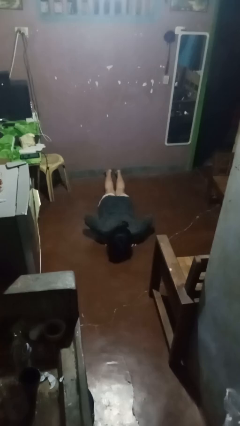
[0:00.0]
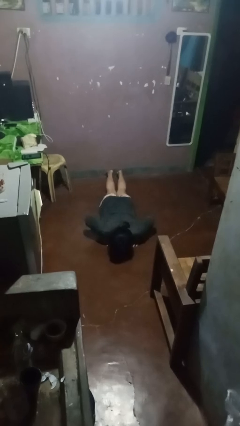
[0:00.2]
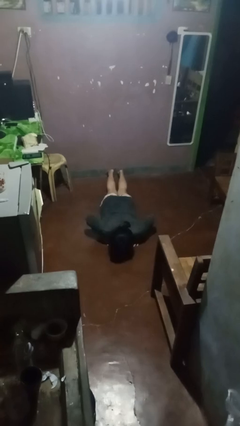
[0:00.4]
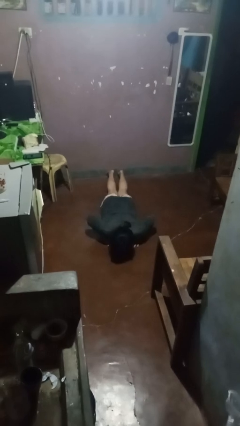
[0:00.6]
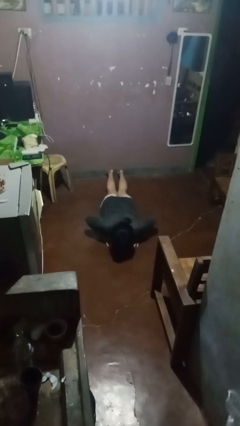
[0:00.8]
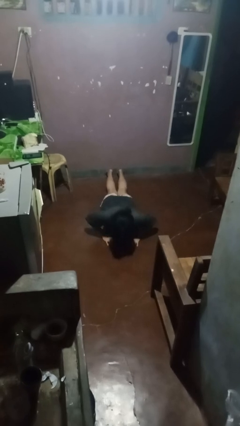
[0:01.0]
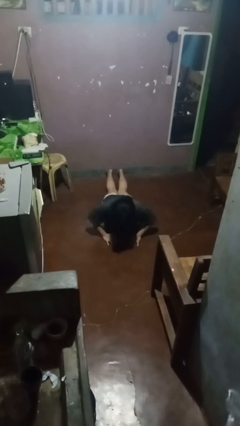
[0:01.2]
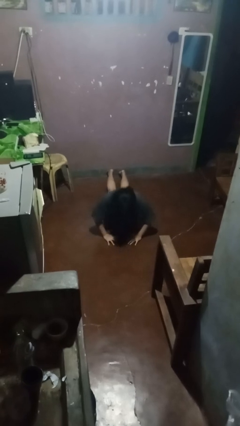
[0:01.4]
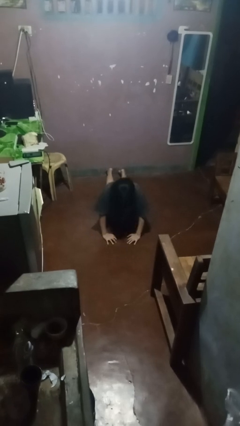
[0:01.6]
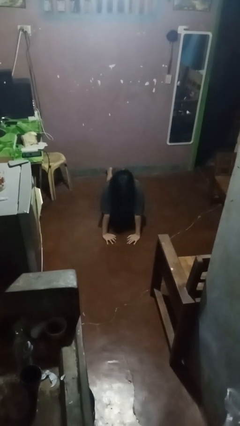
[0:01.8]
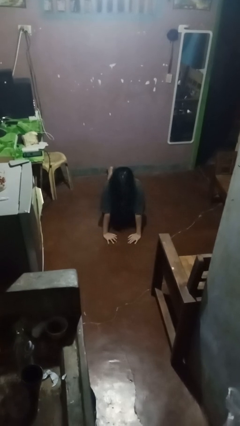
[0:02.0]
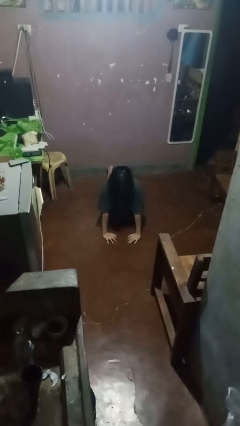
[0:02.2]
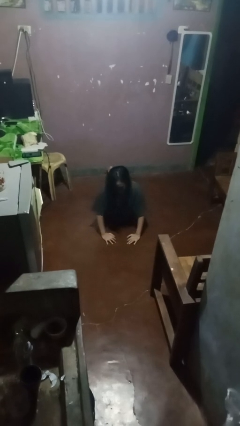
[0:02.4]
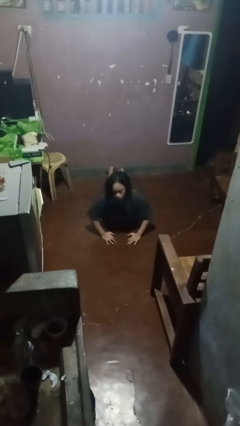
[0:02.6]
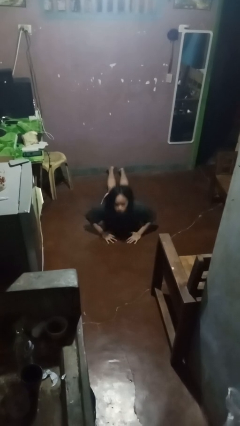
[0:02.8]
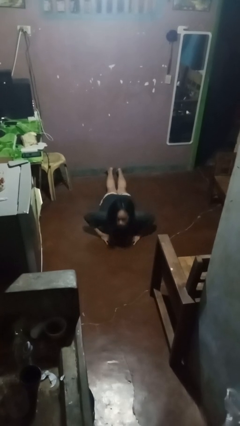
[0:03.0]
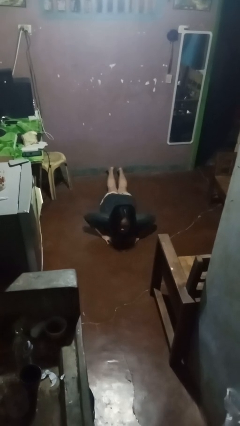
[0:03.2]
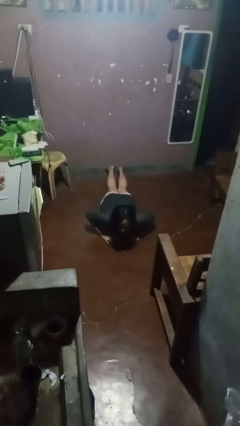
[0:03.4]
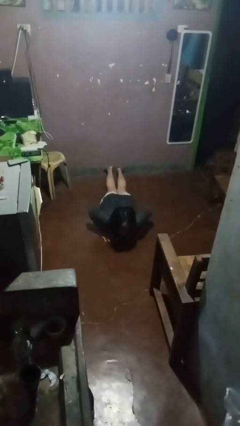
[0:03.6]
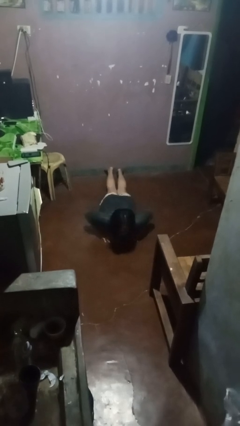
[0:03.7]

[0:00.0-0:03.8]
person exercises with pushup

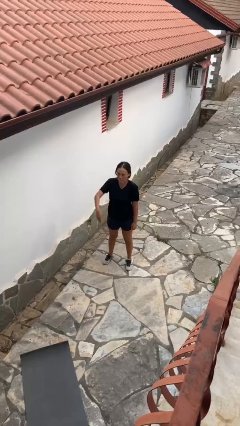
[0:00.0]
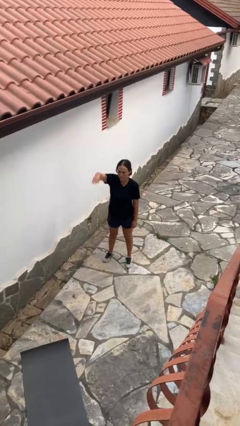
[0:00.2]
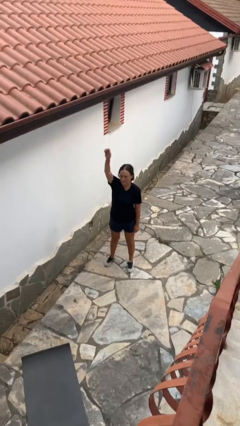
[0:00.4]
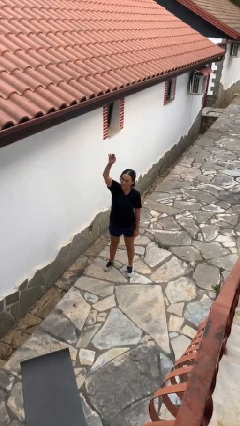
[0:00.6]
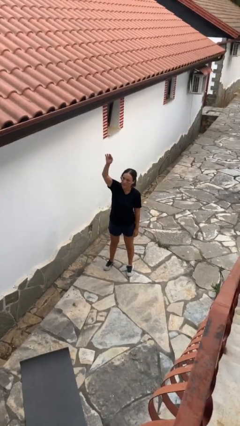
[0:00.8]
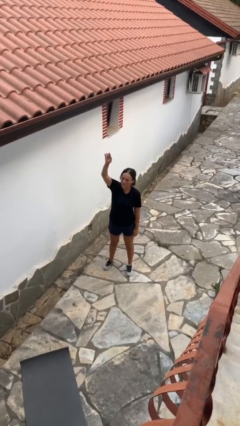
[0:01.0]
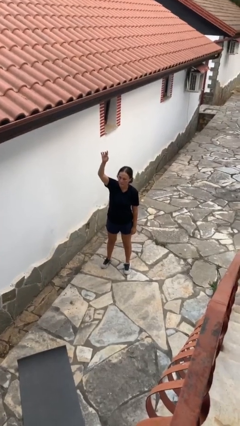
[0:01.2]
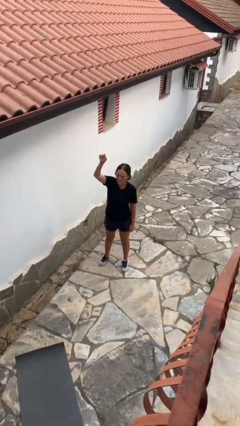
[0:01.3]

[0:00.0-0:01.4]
person gestures swipe up

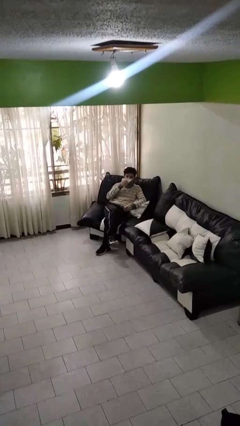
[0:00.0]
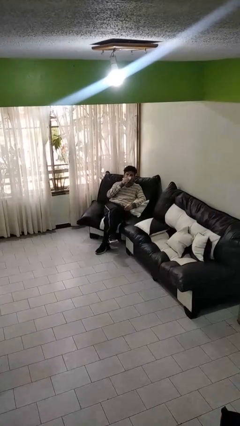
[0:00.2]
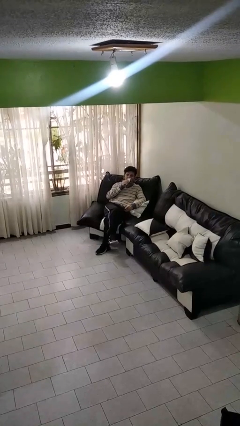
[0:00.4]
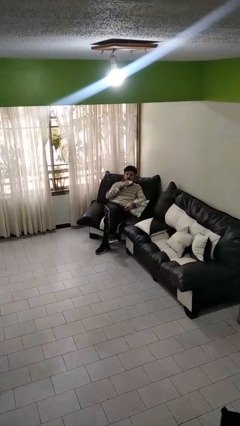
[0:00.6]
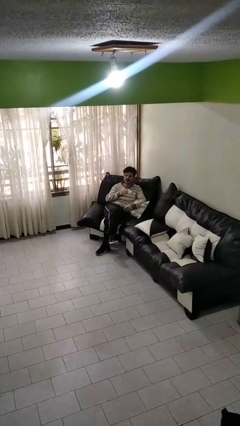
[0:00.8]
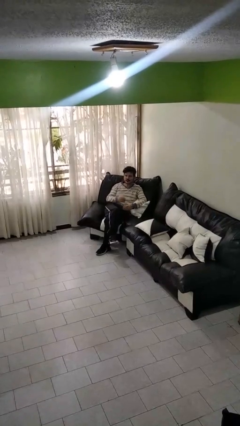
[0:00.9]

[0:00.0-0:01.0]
person wipes mouth with napkin

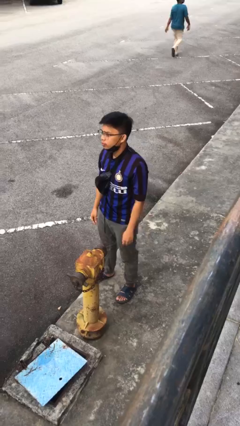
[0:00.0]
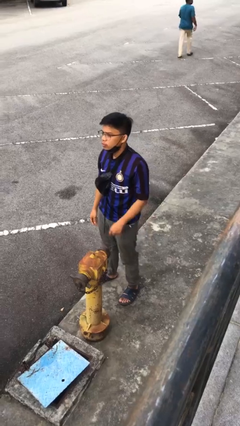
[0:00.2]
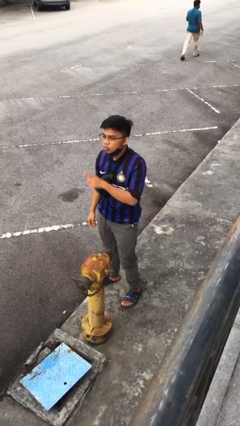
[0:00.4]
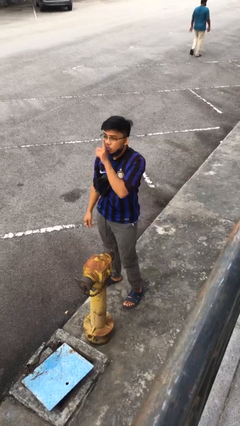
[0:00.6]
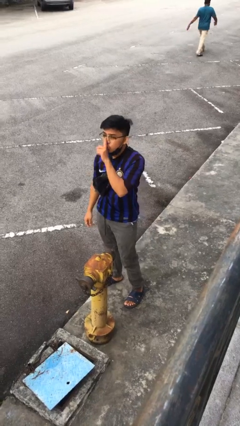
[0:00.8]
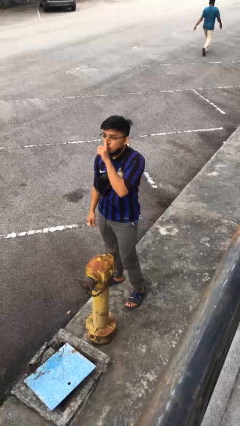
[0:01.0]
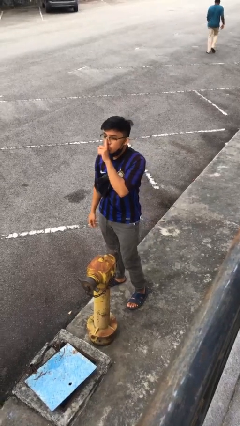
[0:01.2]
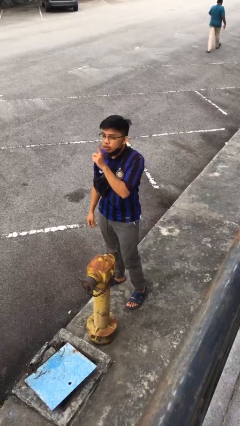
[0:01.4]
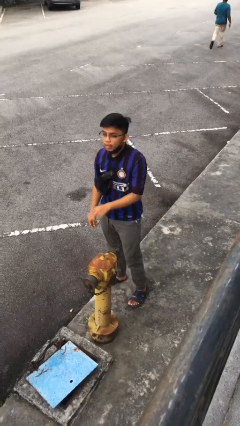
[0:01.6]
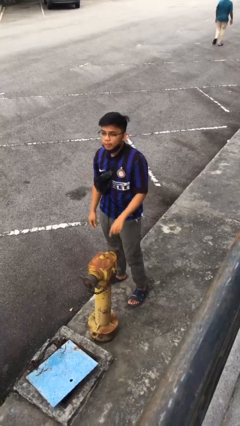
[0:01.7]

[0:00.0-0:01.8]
person gestures be quiet

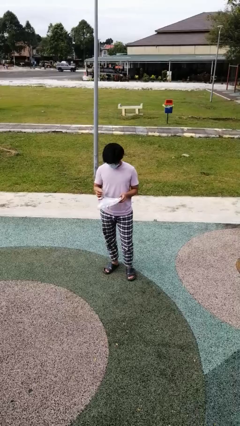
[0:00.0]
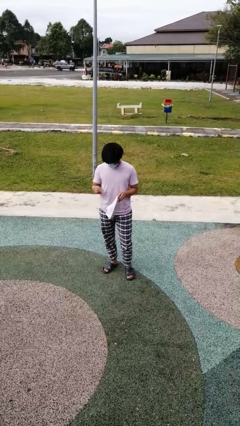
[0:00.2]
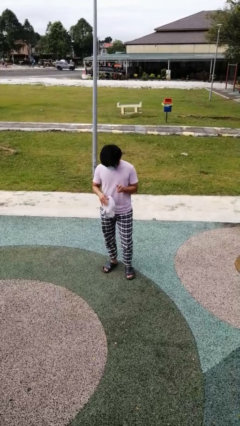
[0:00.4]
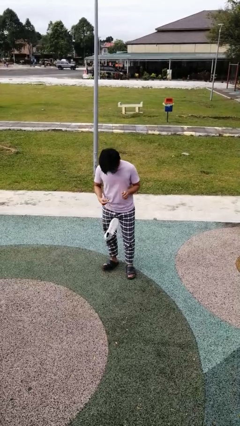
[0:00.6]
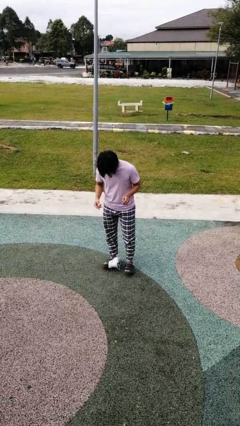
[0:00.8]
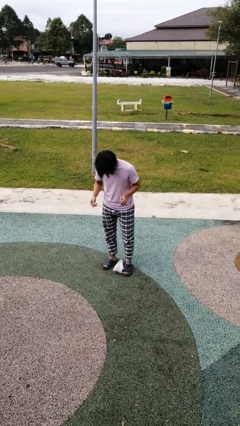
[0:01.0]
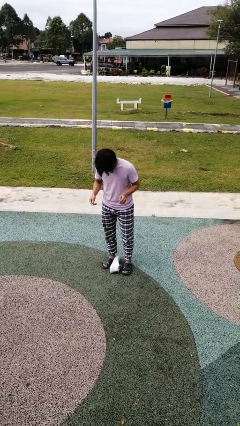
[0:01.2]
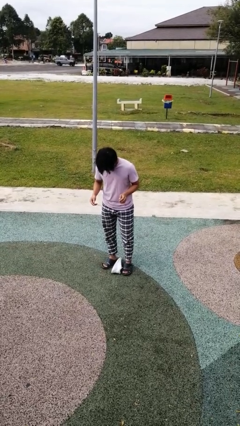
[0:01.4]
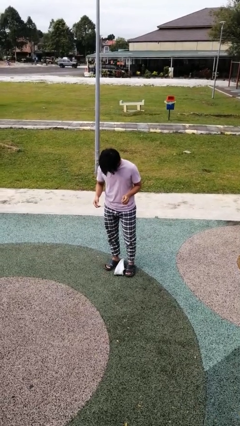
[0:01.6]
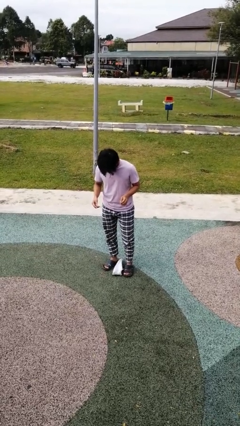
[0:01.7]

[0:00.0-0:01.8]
person drops object

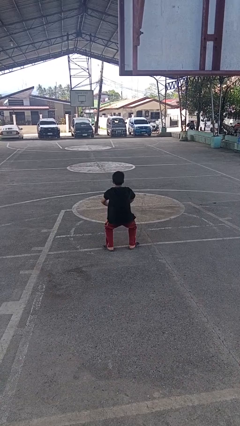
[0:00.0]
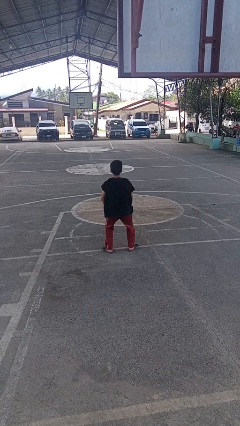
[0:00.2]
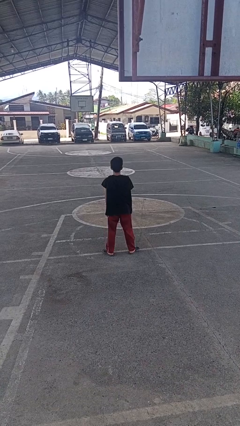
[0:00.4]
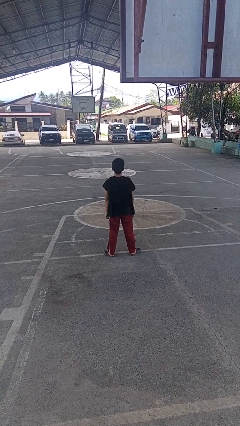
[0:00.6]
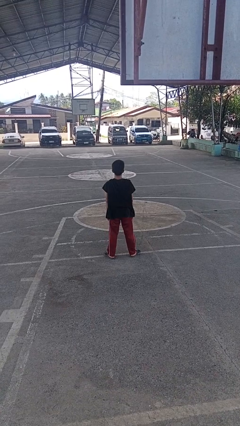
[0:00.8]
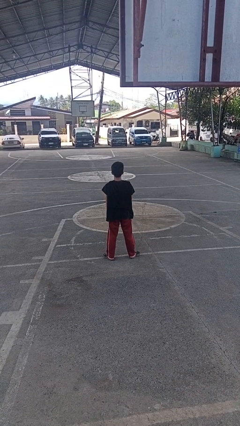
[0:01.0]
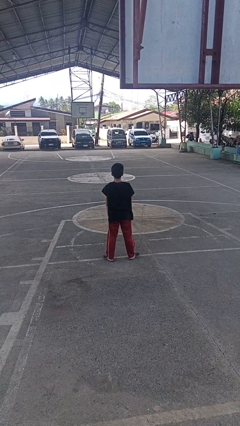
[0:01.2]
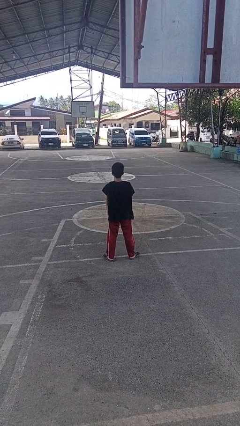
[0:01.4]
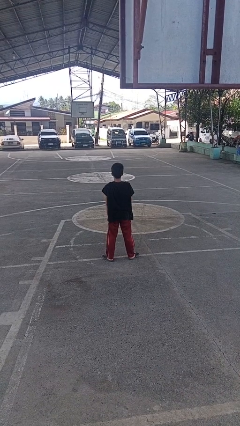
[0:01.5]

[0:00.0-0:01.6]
person stands up

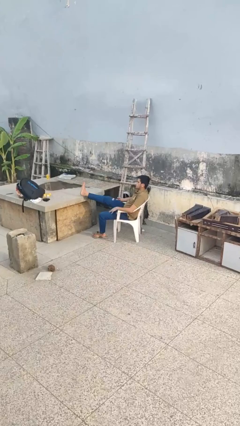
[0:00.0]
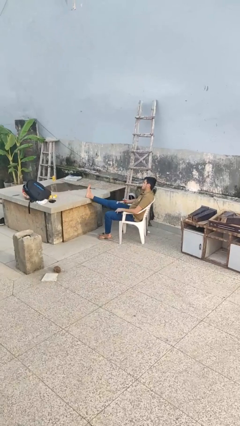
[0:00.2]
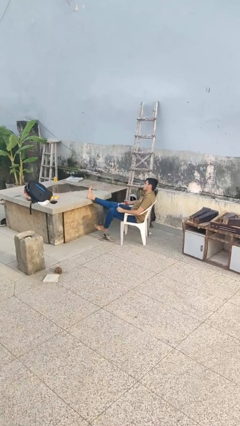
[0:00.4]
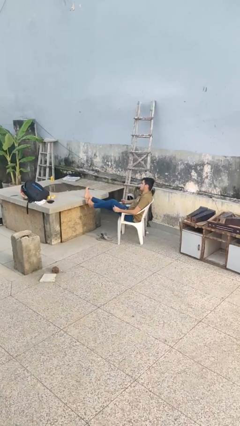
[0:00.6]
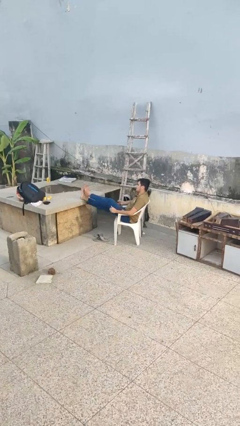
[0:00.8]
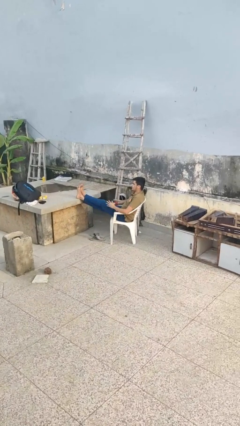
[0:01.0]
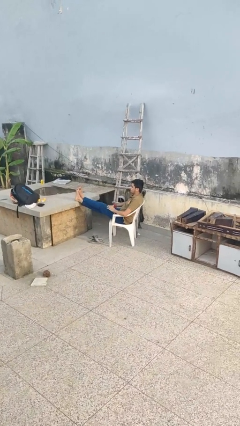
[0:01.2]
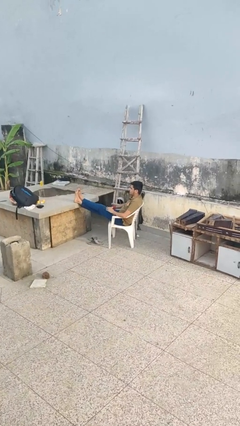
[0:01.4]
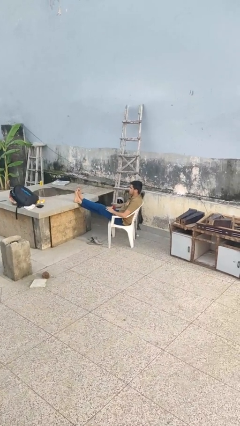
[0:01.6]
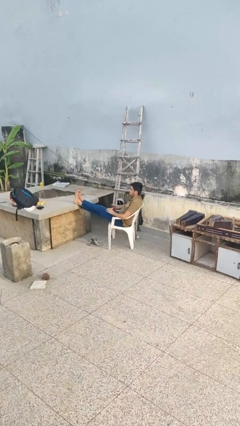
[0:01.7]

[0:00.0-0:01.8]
person puts feet up

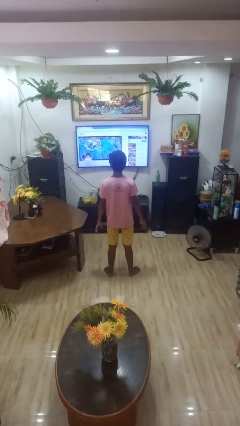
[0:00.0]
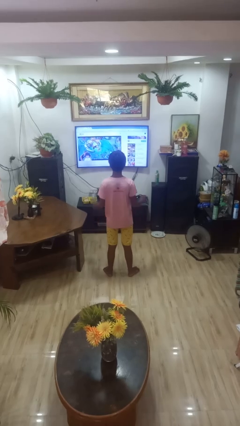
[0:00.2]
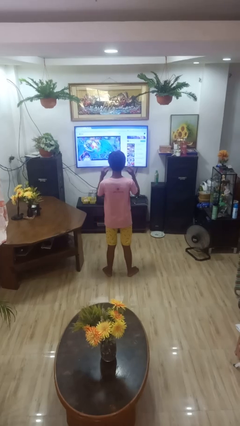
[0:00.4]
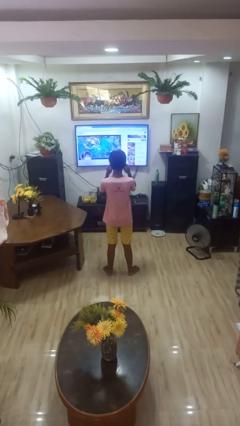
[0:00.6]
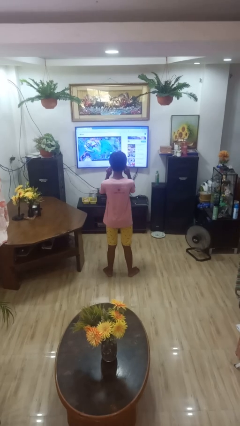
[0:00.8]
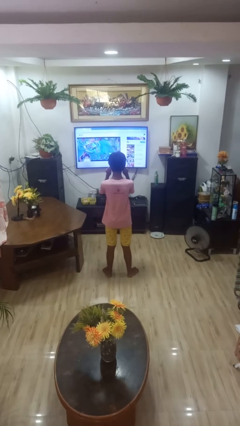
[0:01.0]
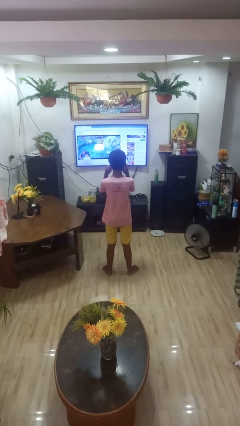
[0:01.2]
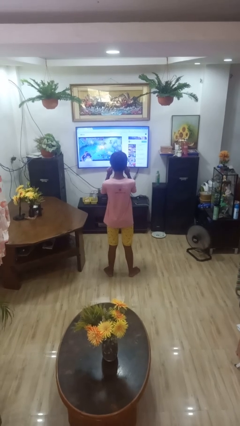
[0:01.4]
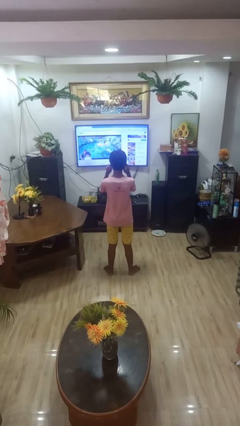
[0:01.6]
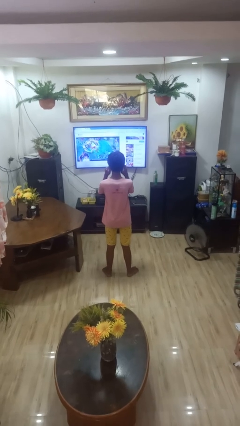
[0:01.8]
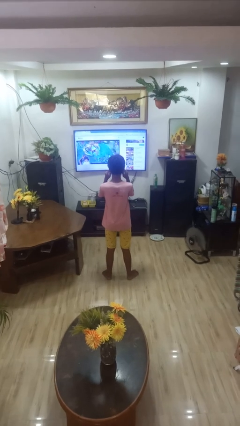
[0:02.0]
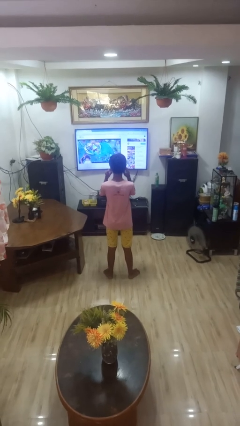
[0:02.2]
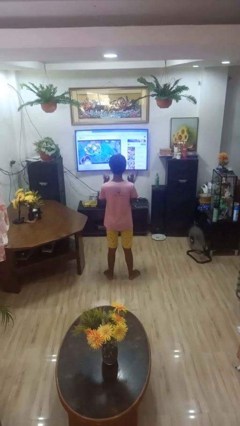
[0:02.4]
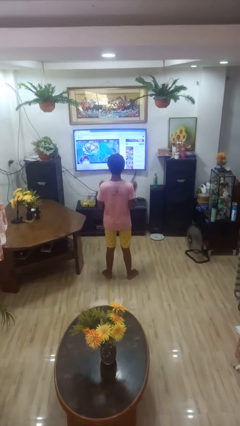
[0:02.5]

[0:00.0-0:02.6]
person touches earlobe

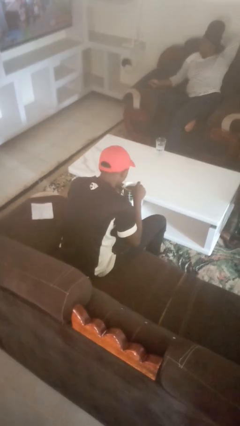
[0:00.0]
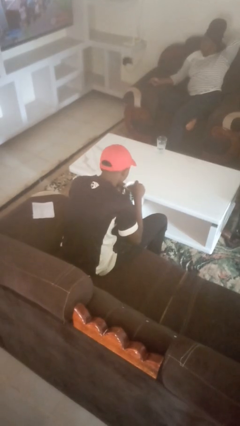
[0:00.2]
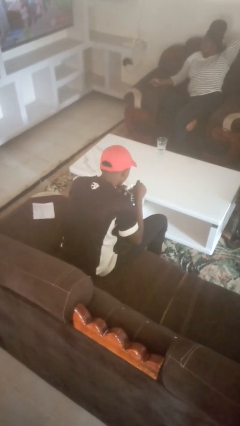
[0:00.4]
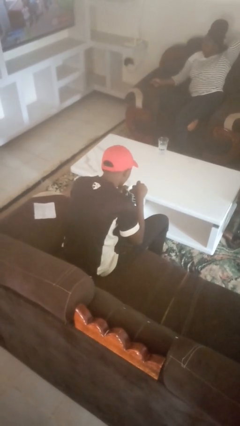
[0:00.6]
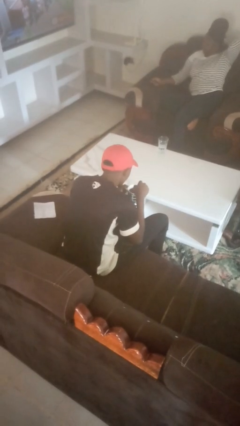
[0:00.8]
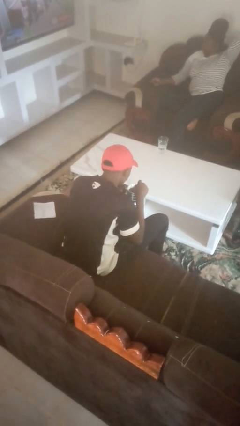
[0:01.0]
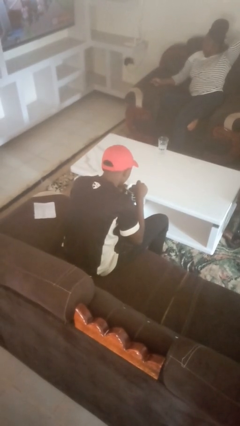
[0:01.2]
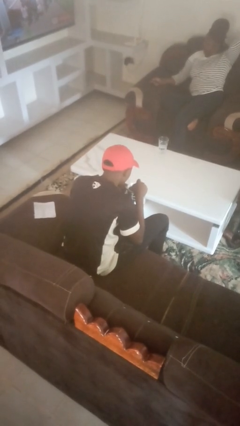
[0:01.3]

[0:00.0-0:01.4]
person stirs mug
